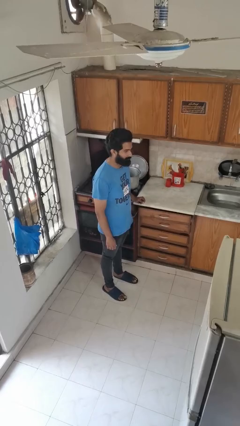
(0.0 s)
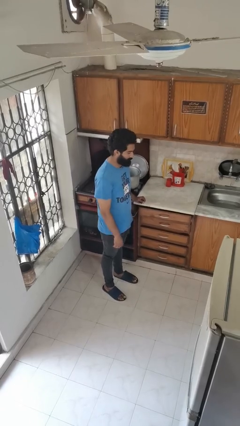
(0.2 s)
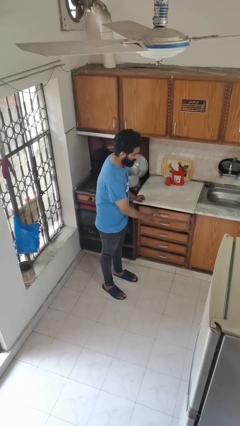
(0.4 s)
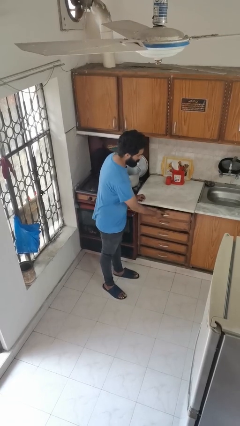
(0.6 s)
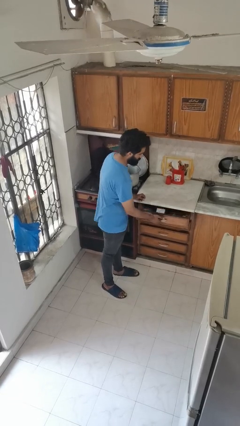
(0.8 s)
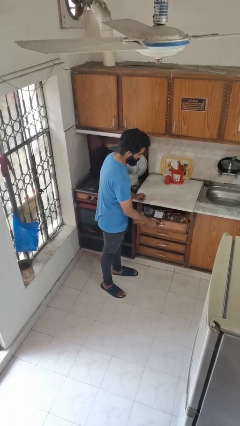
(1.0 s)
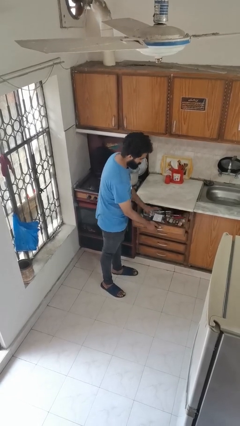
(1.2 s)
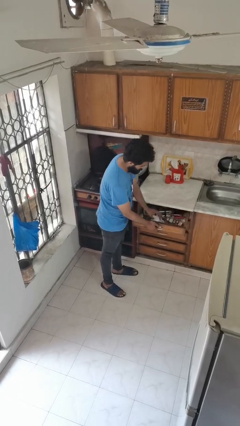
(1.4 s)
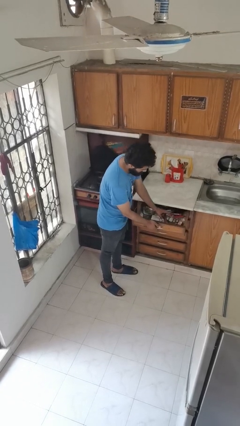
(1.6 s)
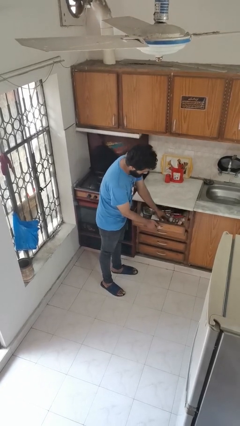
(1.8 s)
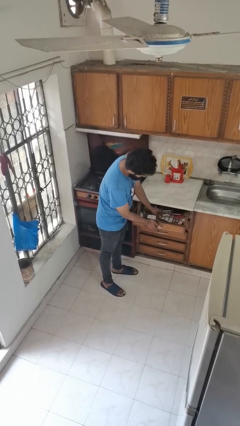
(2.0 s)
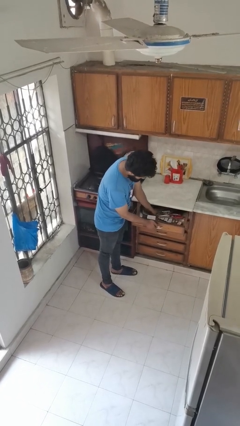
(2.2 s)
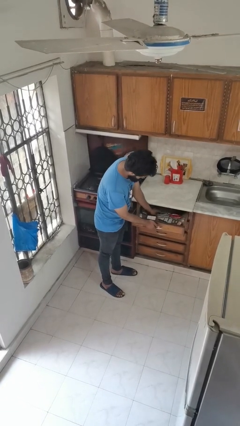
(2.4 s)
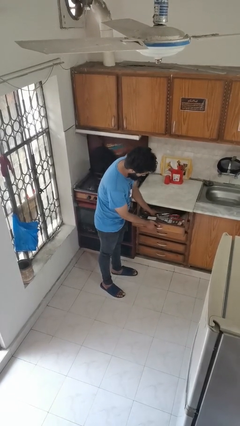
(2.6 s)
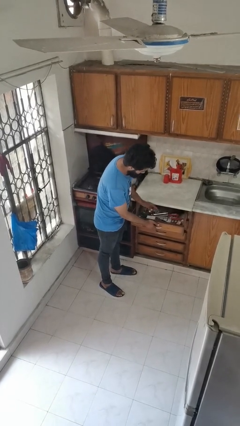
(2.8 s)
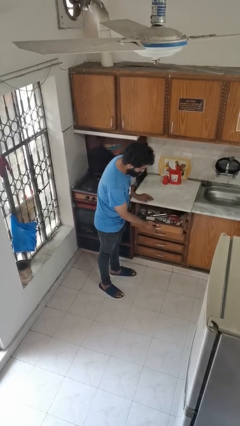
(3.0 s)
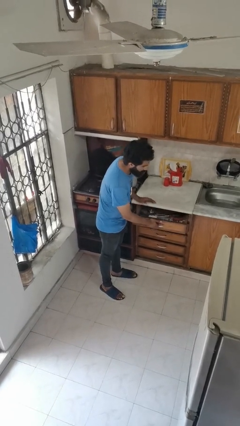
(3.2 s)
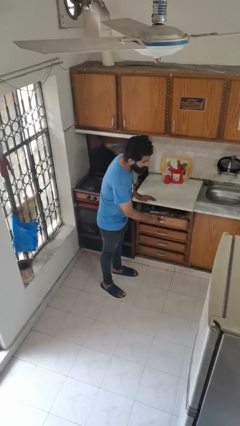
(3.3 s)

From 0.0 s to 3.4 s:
person searches in kitchen drawer

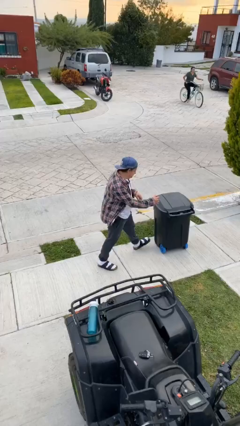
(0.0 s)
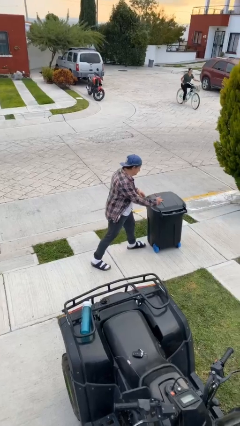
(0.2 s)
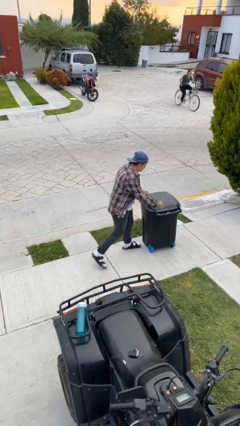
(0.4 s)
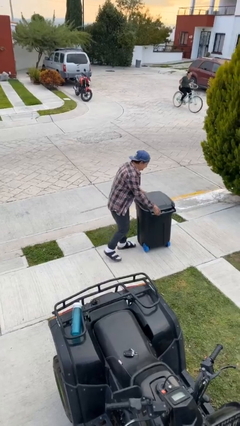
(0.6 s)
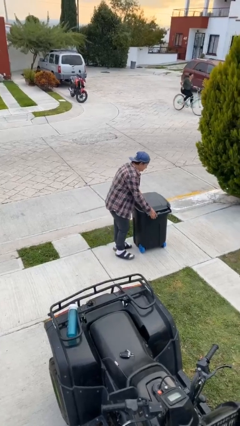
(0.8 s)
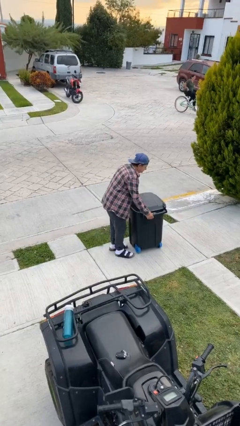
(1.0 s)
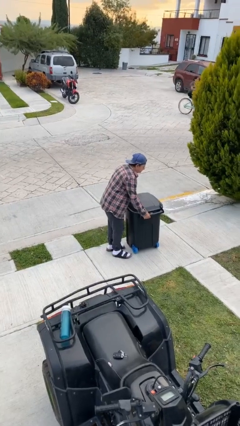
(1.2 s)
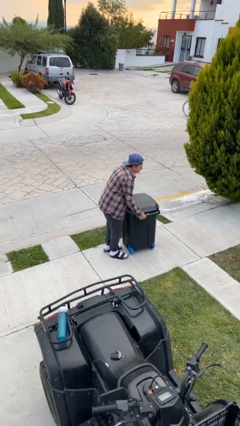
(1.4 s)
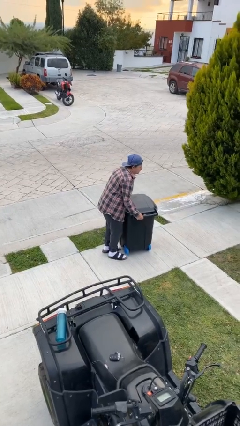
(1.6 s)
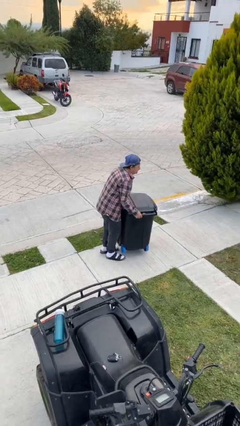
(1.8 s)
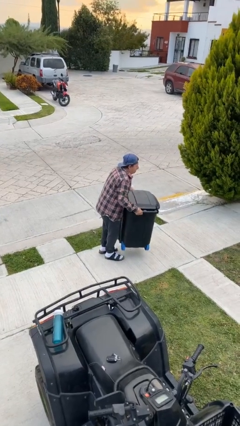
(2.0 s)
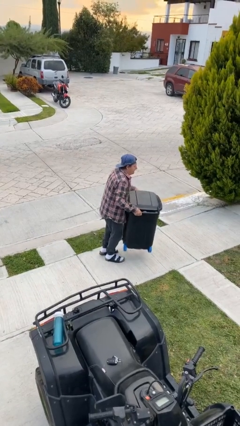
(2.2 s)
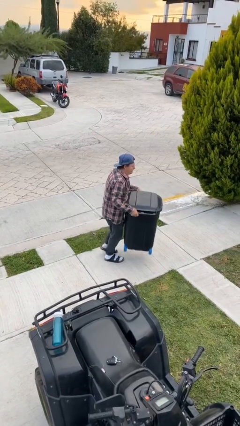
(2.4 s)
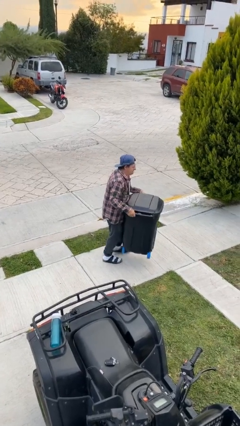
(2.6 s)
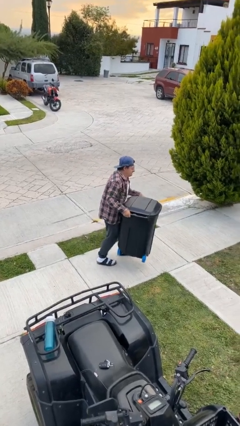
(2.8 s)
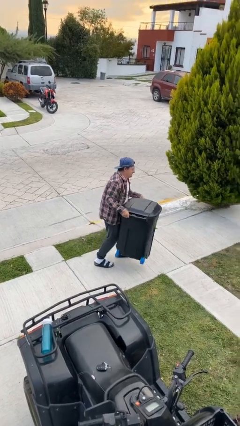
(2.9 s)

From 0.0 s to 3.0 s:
person picks up object from floor

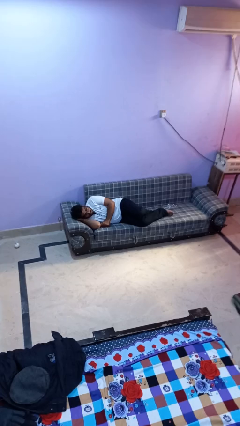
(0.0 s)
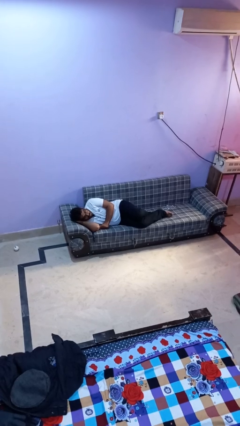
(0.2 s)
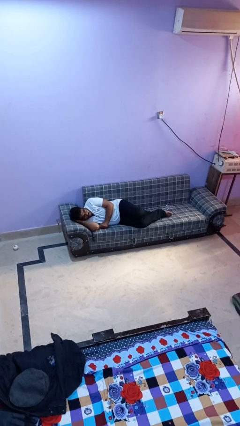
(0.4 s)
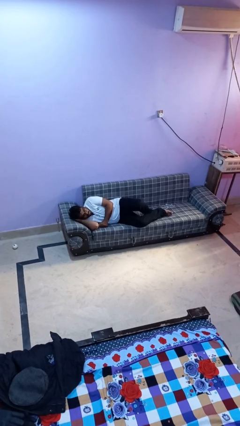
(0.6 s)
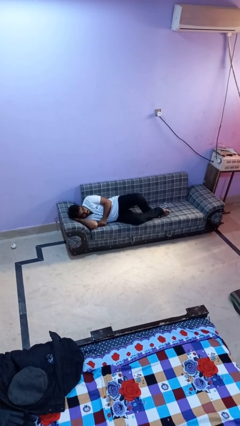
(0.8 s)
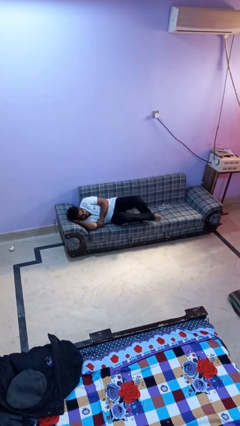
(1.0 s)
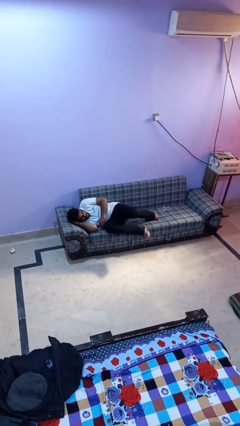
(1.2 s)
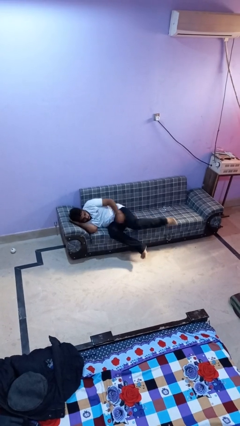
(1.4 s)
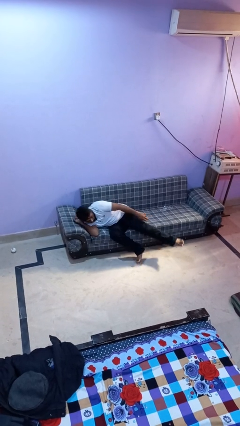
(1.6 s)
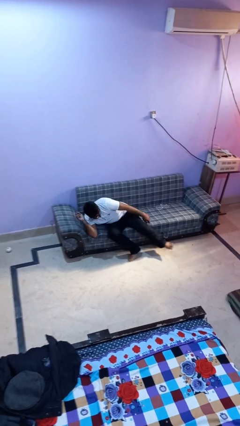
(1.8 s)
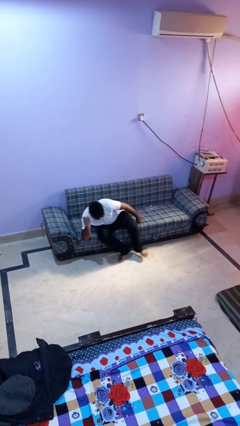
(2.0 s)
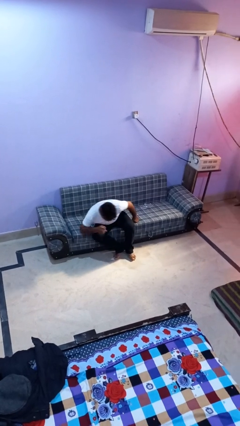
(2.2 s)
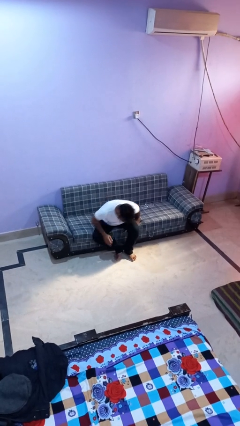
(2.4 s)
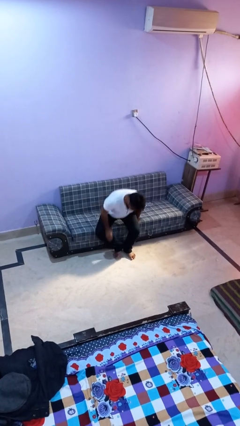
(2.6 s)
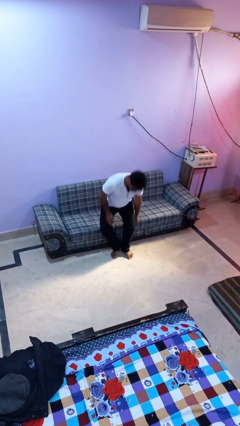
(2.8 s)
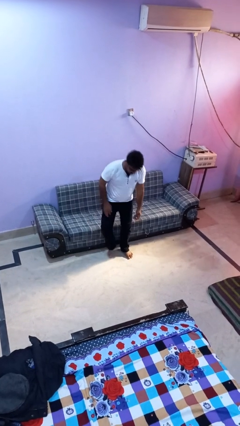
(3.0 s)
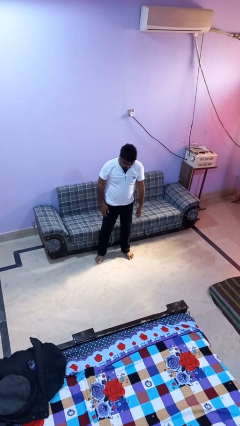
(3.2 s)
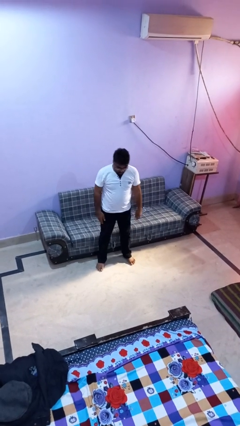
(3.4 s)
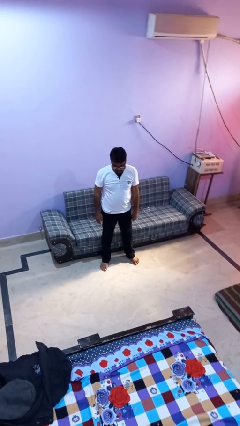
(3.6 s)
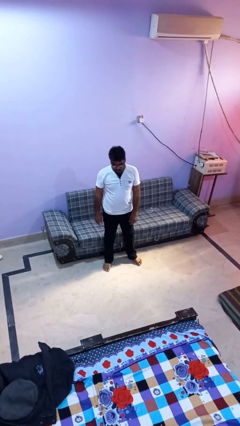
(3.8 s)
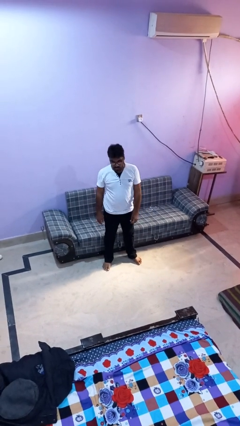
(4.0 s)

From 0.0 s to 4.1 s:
person stands up

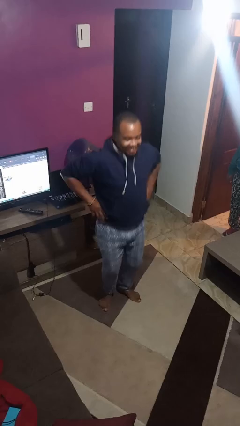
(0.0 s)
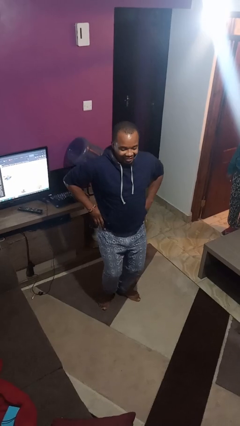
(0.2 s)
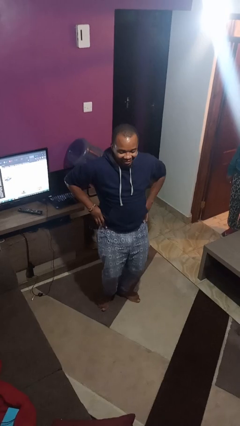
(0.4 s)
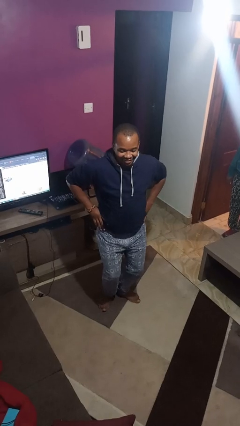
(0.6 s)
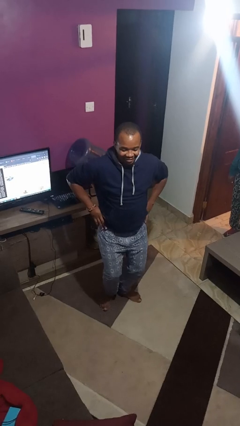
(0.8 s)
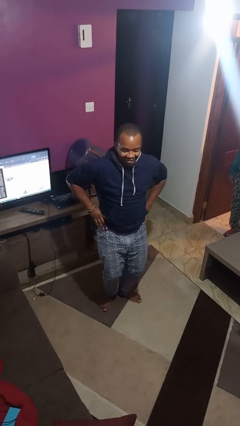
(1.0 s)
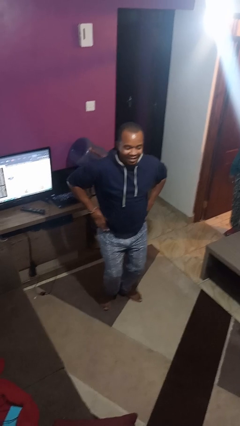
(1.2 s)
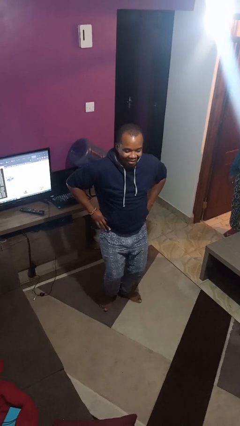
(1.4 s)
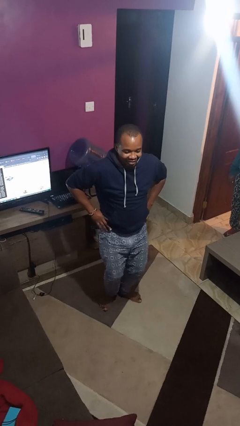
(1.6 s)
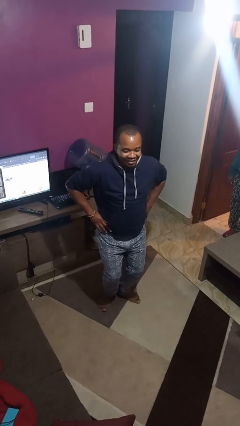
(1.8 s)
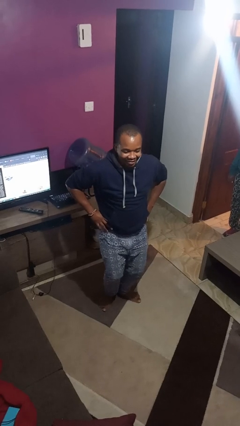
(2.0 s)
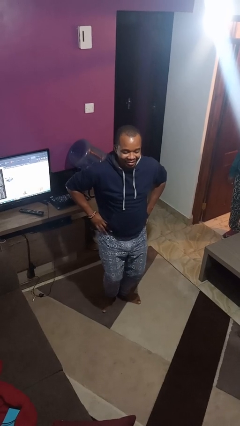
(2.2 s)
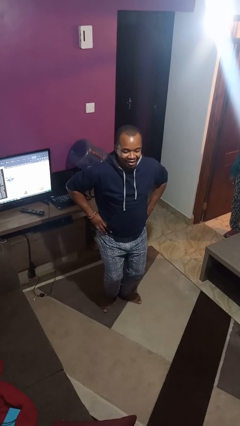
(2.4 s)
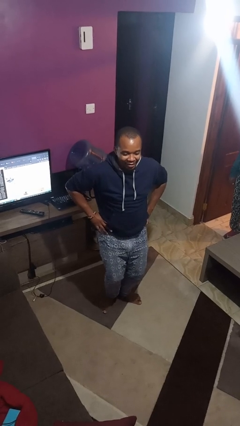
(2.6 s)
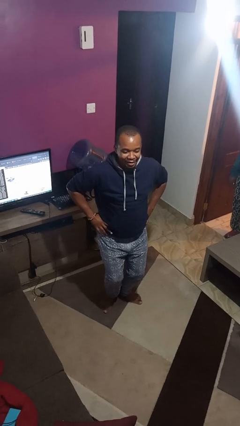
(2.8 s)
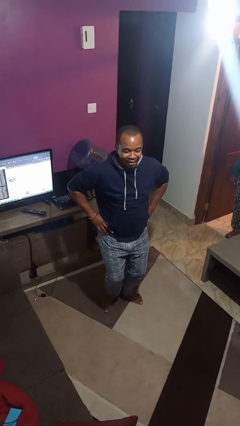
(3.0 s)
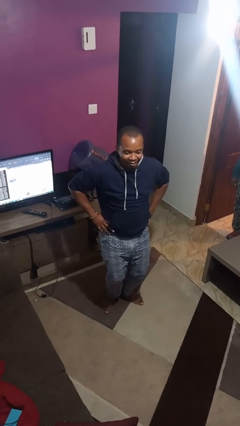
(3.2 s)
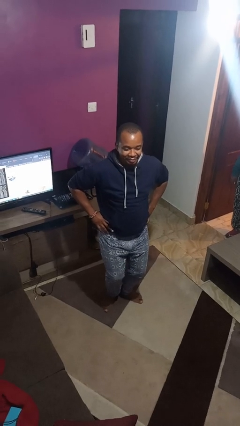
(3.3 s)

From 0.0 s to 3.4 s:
person wiggles hips

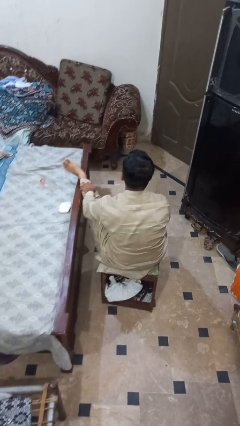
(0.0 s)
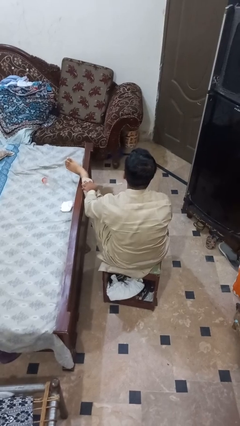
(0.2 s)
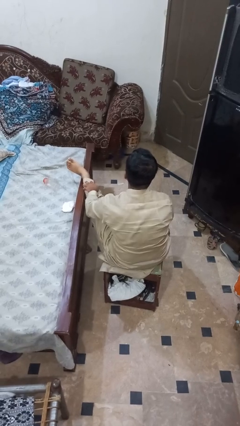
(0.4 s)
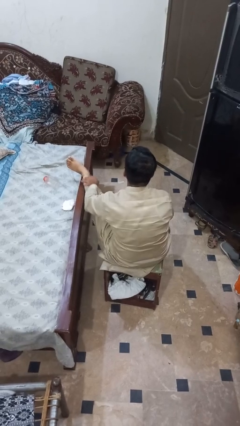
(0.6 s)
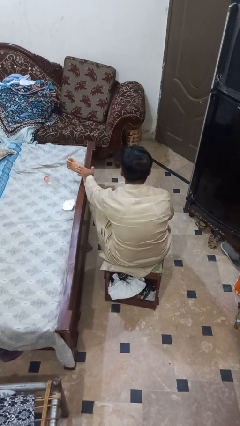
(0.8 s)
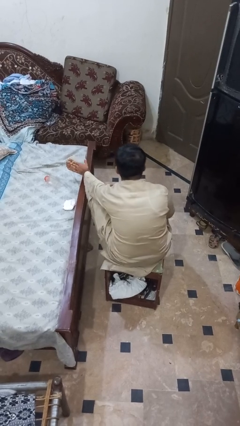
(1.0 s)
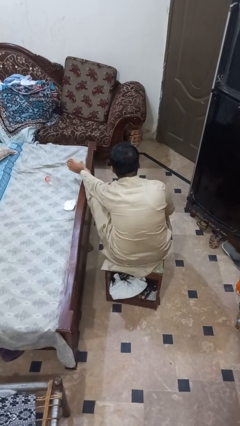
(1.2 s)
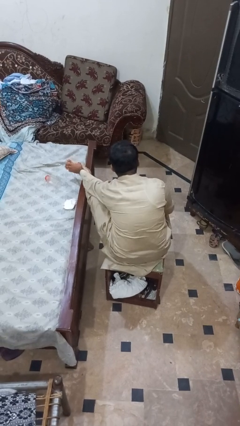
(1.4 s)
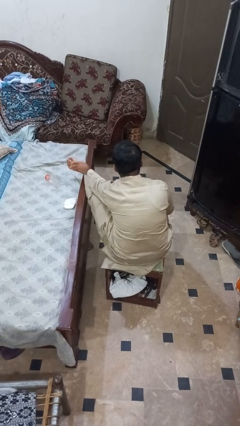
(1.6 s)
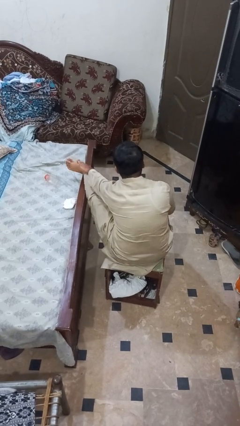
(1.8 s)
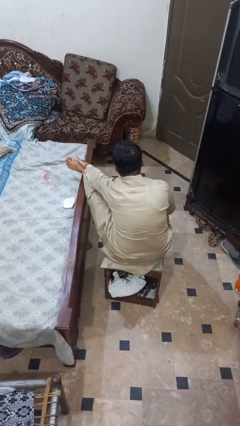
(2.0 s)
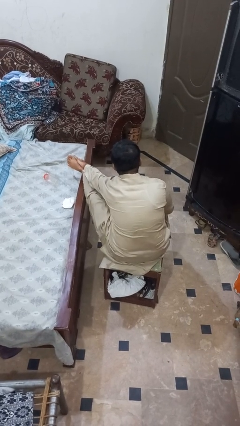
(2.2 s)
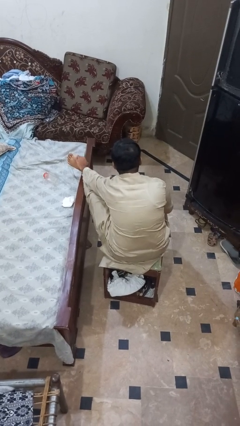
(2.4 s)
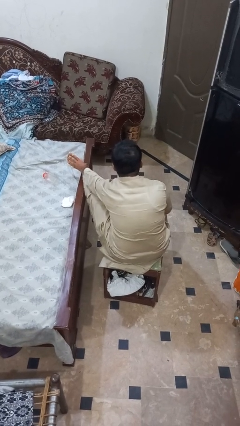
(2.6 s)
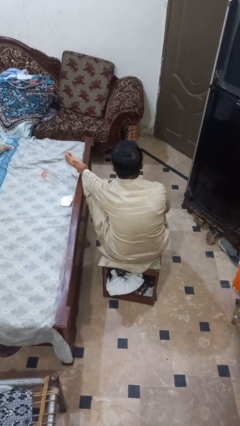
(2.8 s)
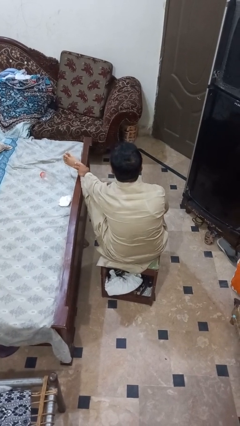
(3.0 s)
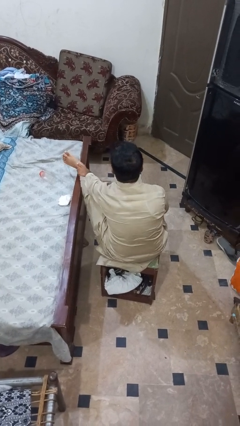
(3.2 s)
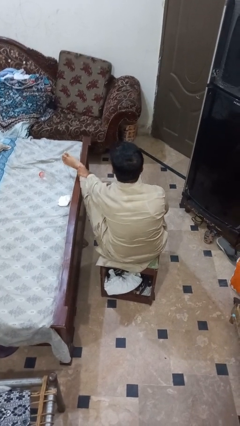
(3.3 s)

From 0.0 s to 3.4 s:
person rubs foot

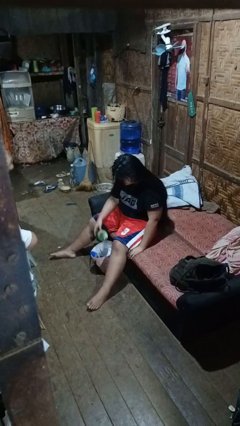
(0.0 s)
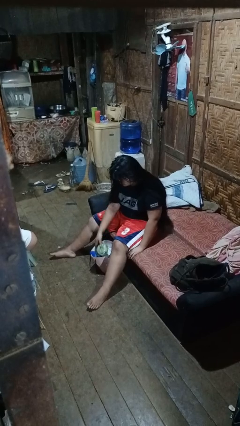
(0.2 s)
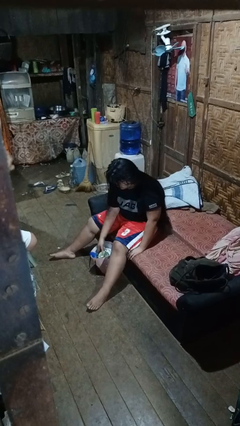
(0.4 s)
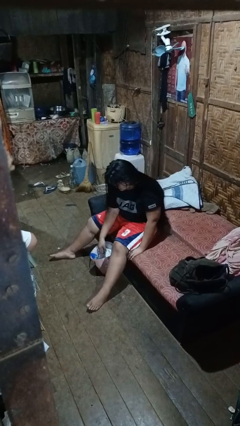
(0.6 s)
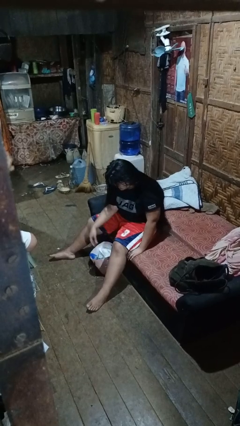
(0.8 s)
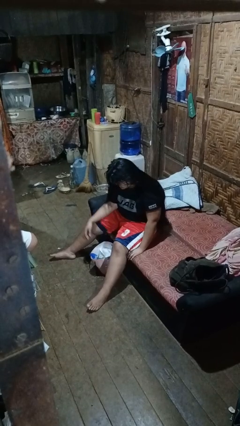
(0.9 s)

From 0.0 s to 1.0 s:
person puts object into bag
